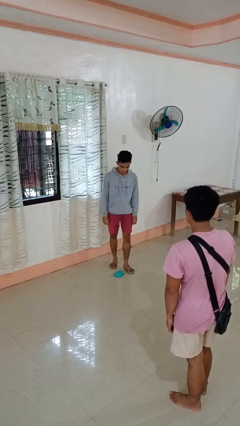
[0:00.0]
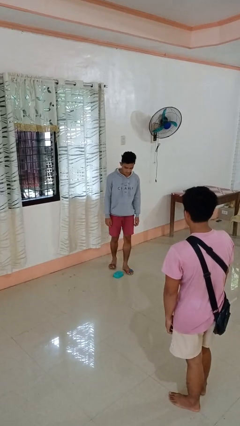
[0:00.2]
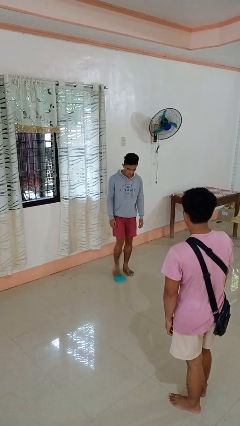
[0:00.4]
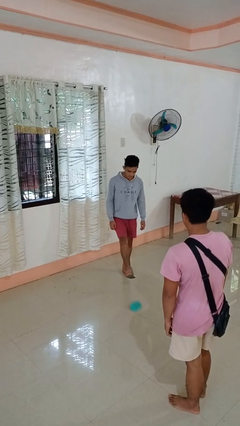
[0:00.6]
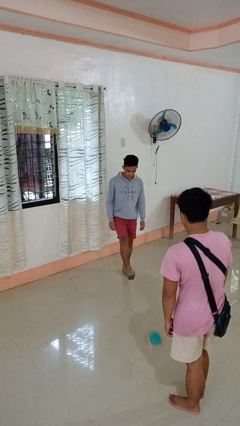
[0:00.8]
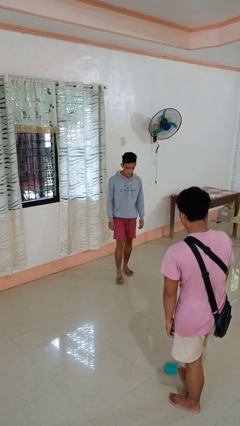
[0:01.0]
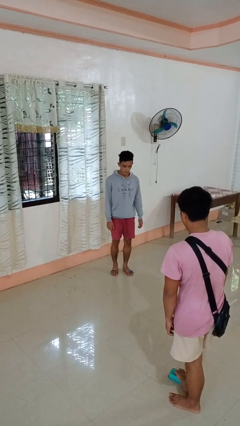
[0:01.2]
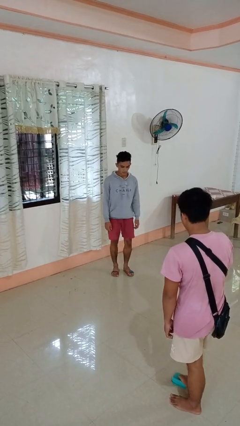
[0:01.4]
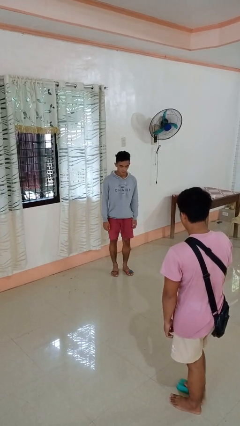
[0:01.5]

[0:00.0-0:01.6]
person kicks object to person

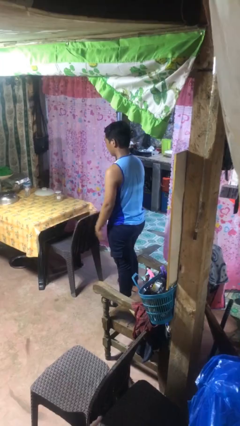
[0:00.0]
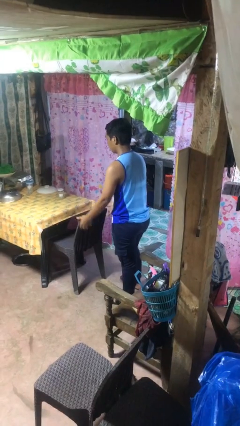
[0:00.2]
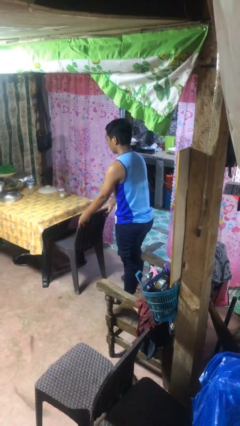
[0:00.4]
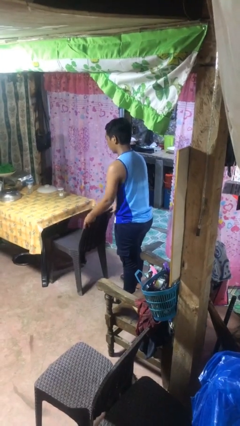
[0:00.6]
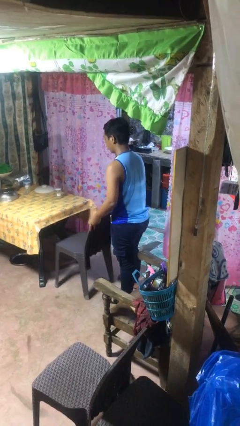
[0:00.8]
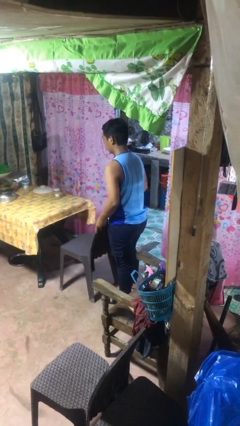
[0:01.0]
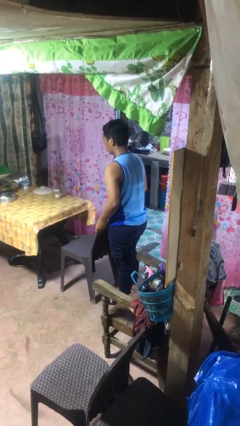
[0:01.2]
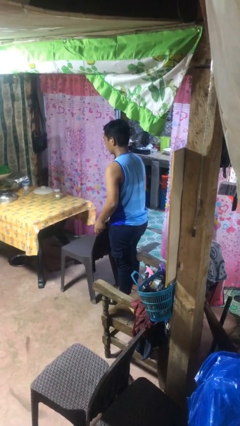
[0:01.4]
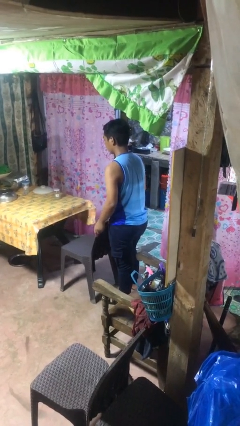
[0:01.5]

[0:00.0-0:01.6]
person pulls out chair

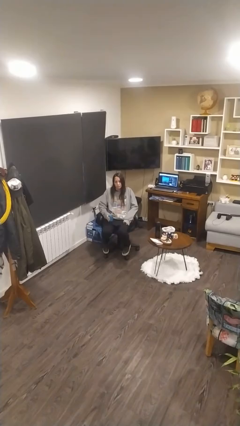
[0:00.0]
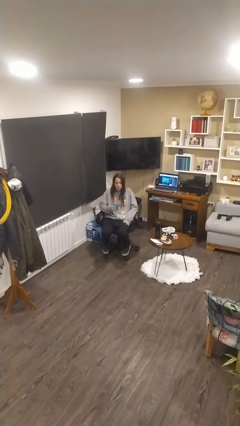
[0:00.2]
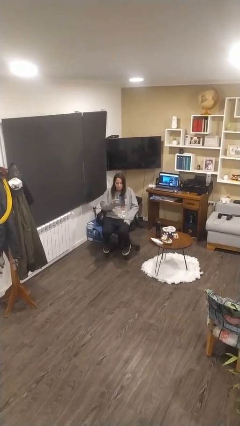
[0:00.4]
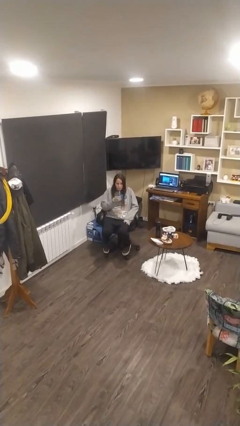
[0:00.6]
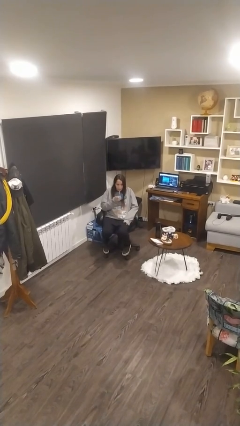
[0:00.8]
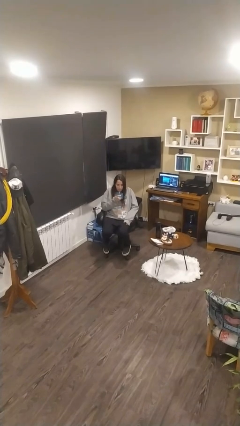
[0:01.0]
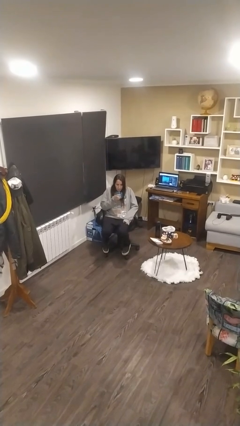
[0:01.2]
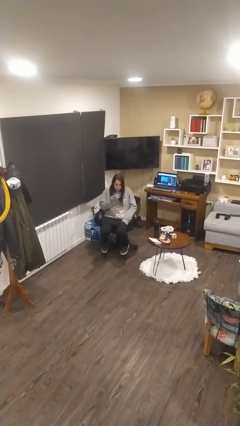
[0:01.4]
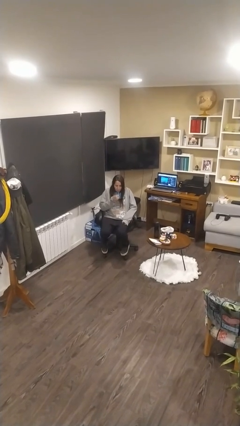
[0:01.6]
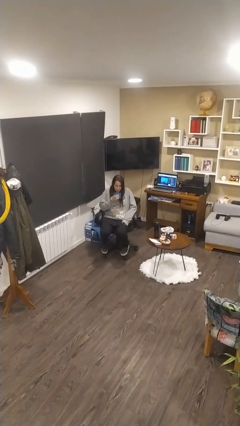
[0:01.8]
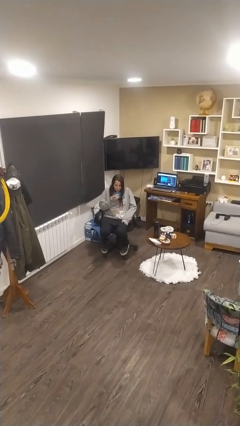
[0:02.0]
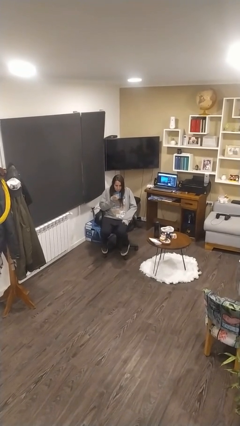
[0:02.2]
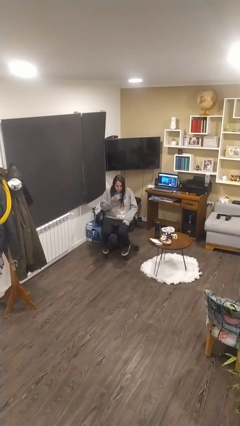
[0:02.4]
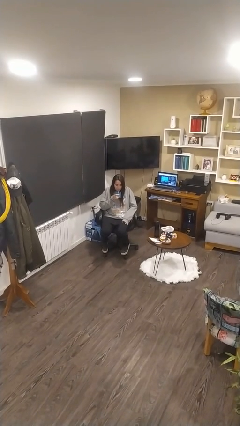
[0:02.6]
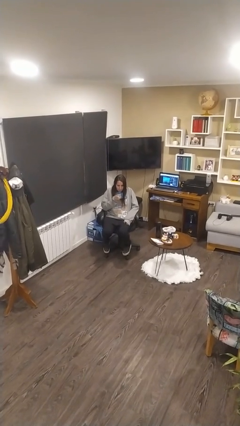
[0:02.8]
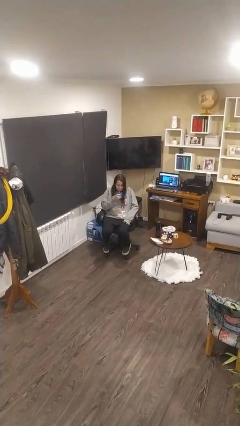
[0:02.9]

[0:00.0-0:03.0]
person drinks from straw

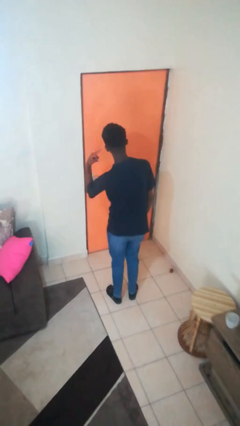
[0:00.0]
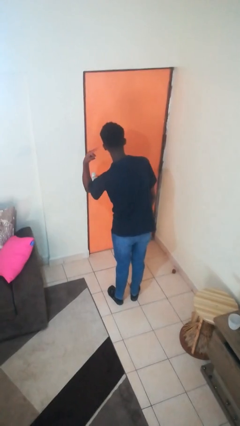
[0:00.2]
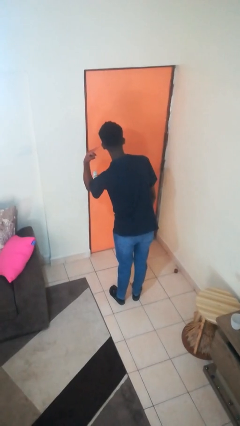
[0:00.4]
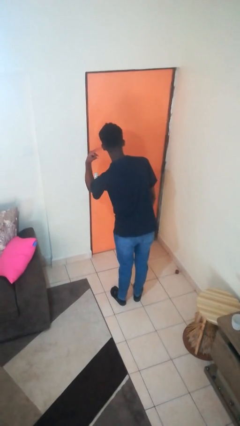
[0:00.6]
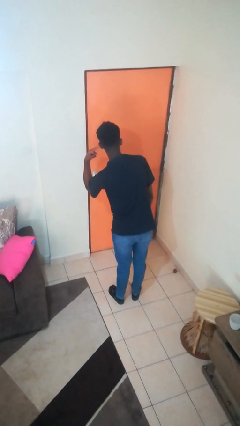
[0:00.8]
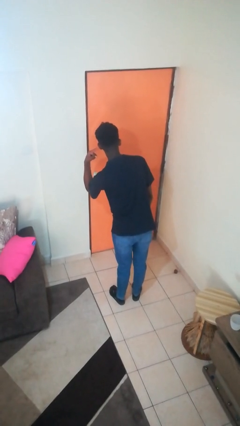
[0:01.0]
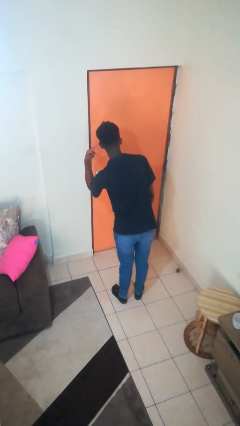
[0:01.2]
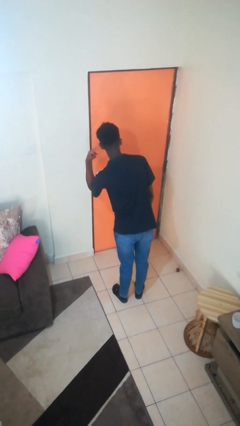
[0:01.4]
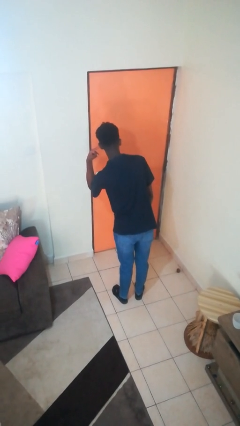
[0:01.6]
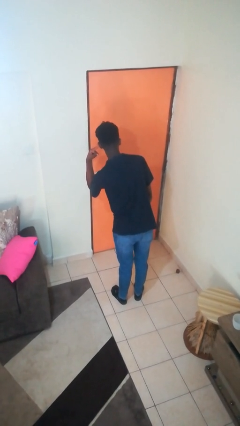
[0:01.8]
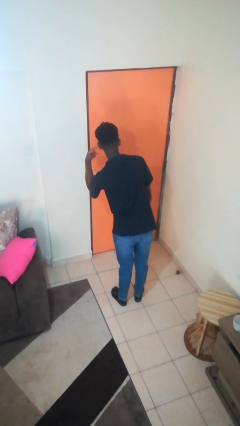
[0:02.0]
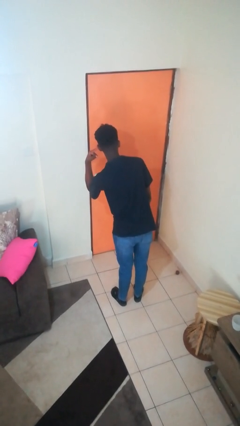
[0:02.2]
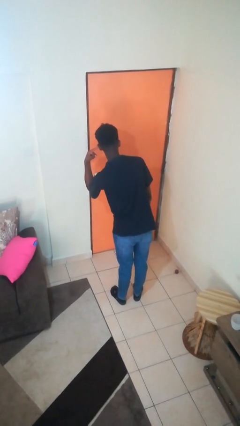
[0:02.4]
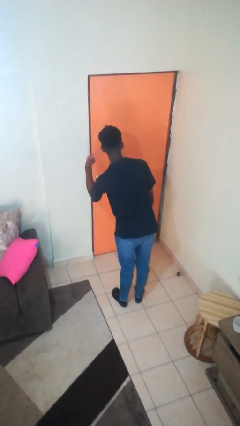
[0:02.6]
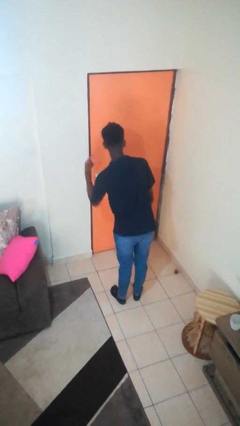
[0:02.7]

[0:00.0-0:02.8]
person gestures listen closely

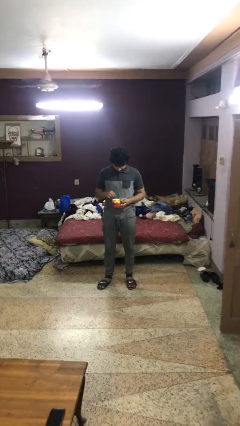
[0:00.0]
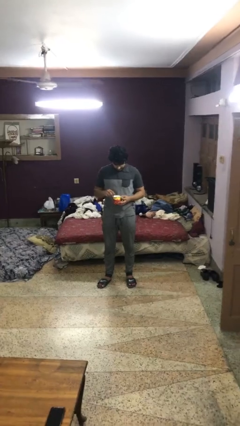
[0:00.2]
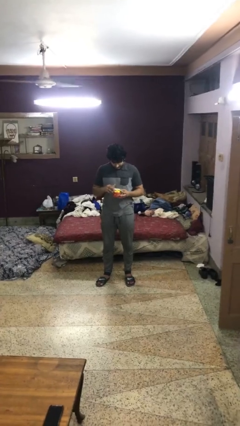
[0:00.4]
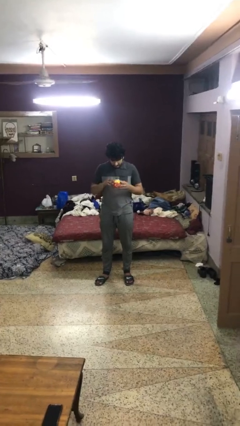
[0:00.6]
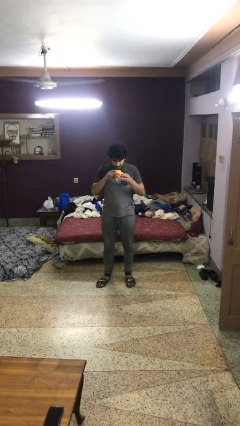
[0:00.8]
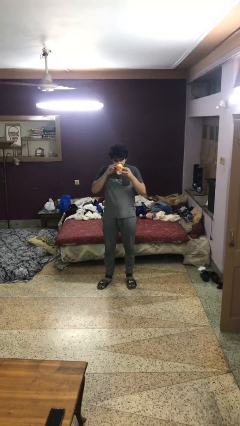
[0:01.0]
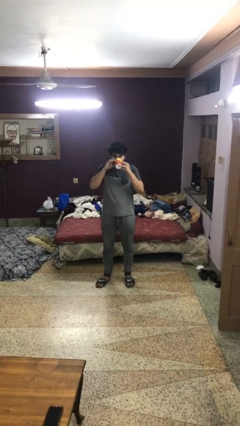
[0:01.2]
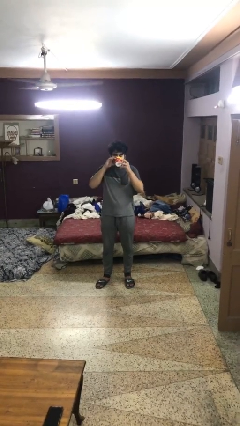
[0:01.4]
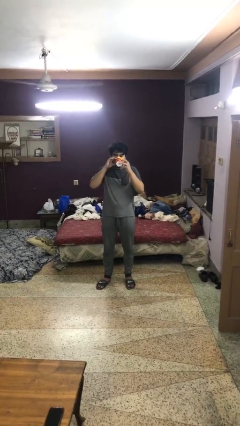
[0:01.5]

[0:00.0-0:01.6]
person drinks from mug

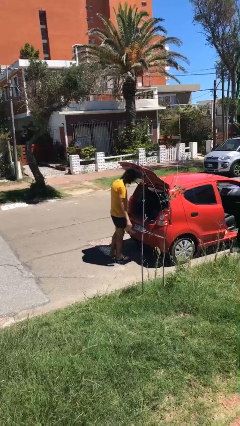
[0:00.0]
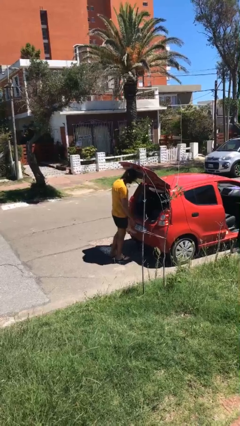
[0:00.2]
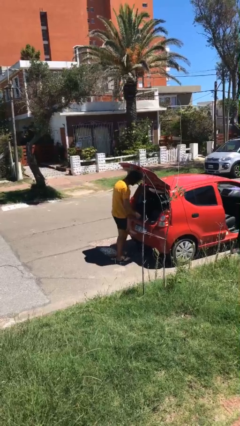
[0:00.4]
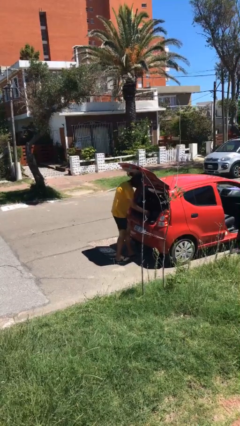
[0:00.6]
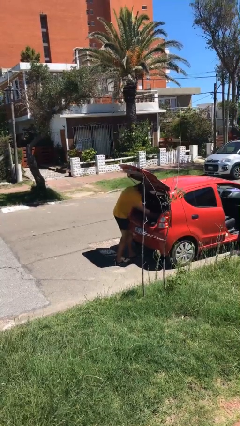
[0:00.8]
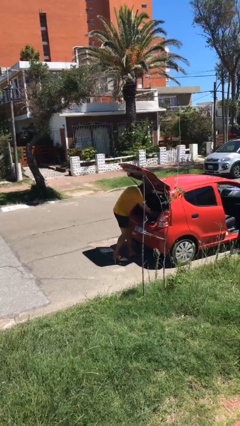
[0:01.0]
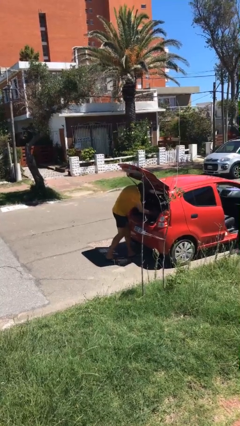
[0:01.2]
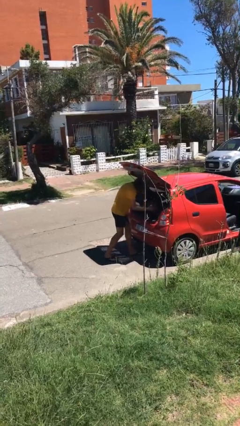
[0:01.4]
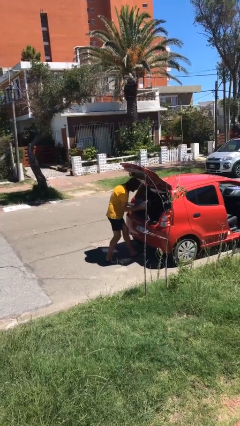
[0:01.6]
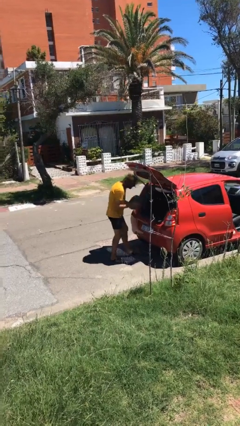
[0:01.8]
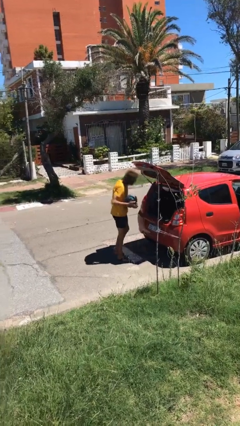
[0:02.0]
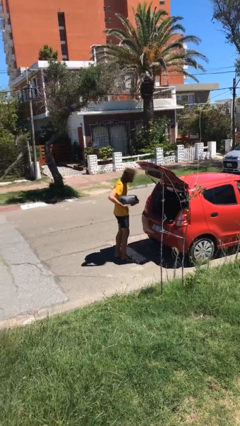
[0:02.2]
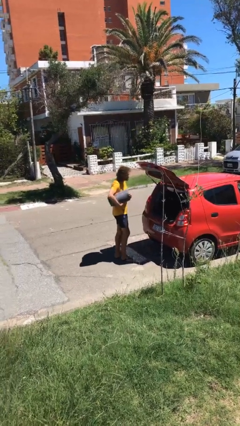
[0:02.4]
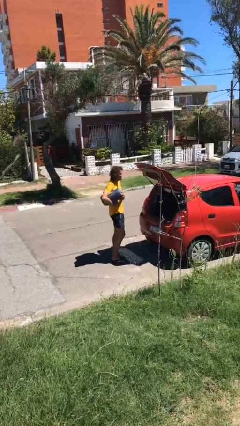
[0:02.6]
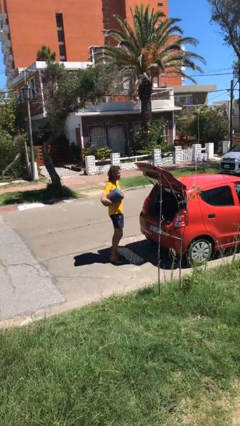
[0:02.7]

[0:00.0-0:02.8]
person unloads car

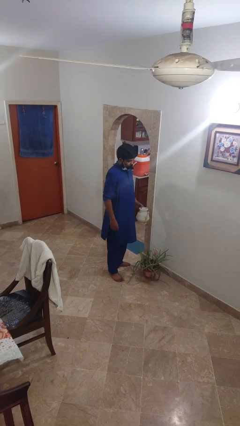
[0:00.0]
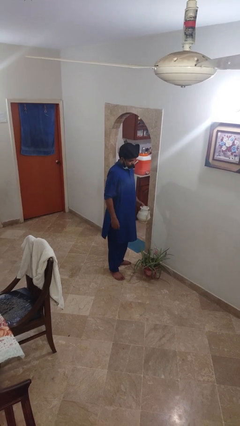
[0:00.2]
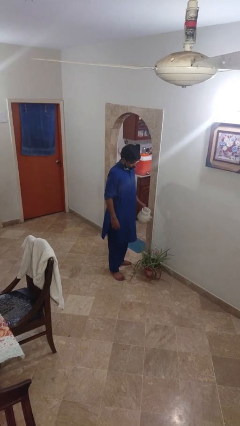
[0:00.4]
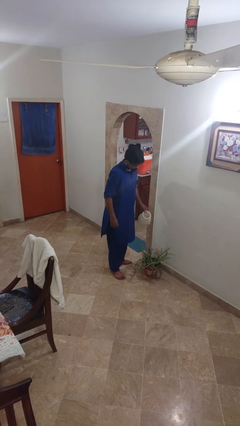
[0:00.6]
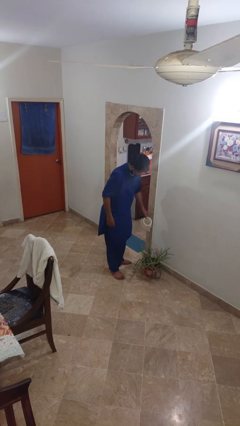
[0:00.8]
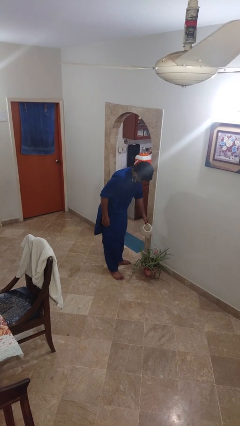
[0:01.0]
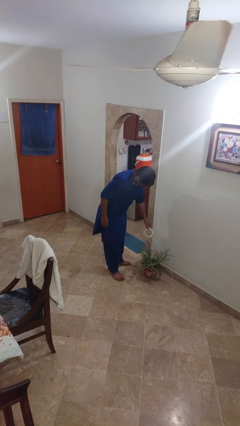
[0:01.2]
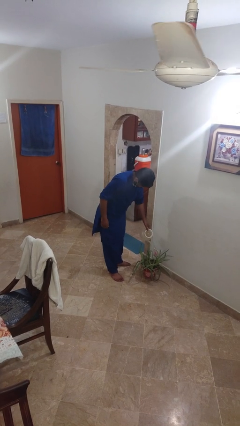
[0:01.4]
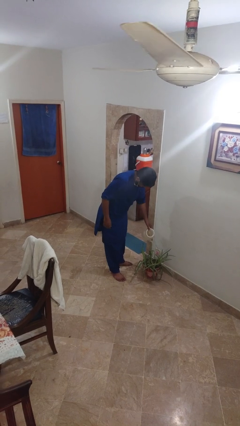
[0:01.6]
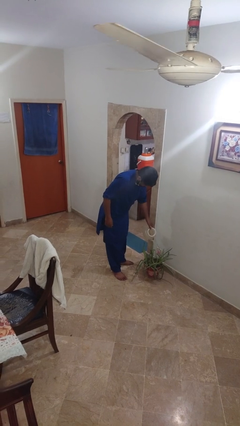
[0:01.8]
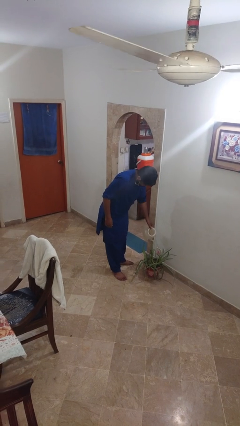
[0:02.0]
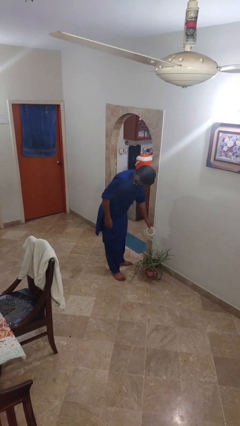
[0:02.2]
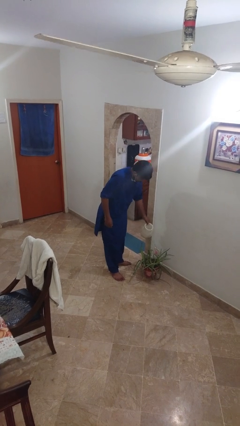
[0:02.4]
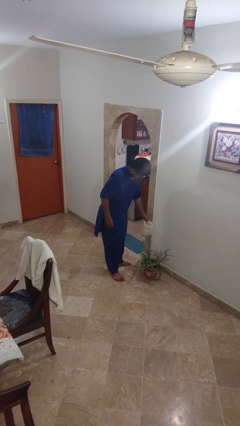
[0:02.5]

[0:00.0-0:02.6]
person waters houseplant

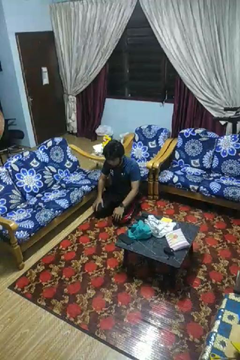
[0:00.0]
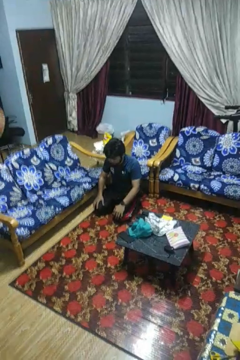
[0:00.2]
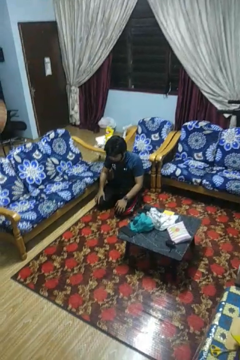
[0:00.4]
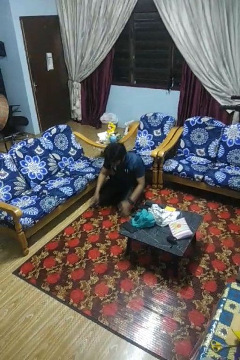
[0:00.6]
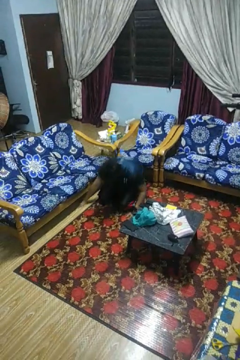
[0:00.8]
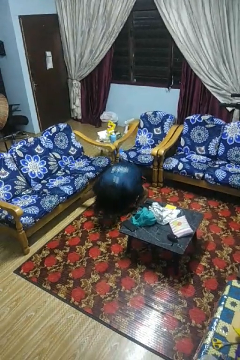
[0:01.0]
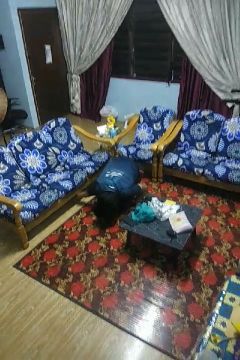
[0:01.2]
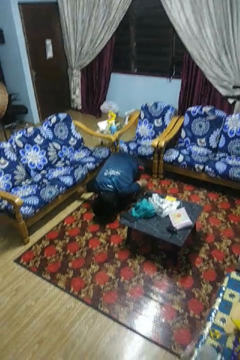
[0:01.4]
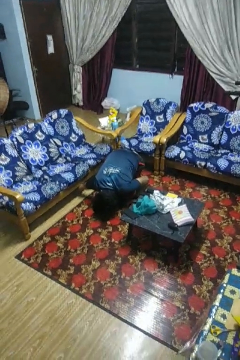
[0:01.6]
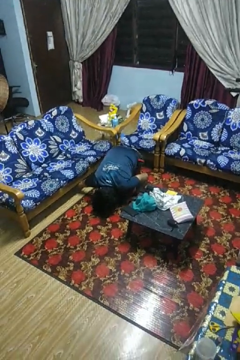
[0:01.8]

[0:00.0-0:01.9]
person searches under couch
